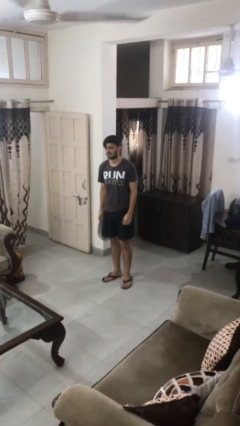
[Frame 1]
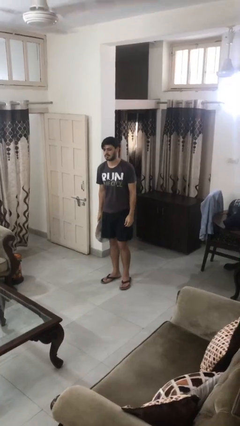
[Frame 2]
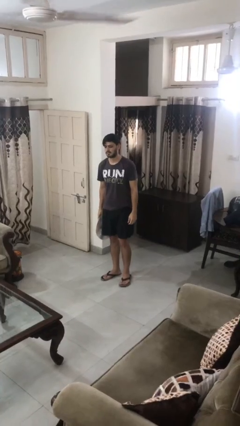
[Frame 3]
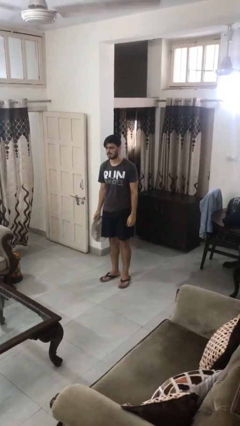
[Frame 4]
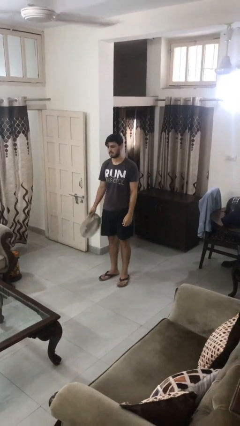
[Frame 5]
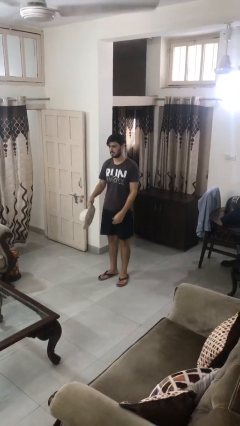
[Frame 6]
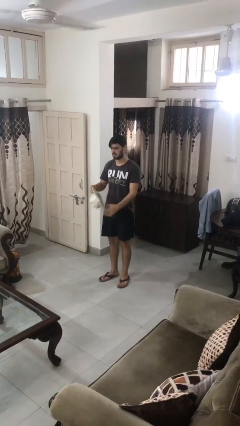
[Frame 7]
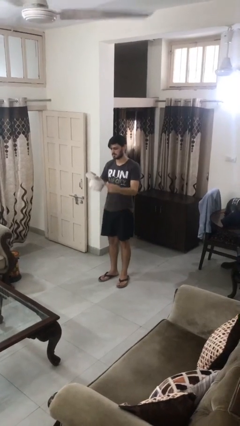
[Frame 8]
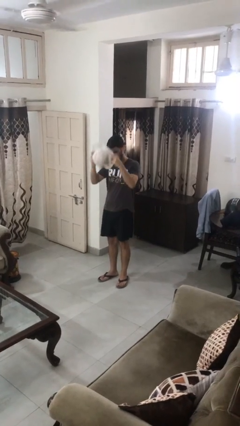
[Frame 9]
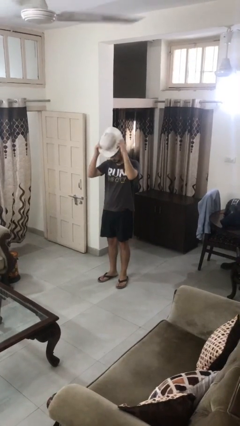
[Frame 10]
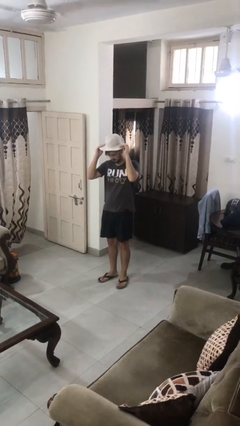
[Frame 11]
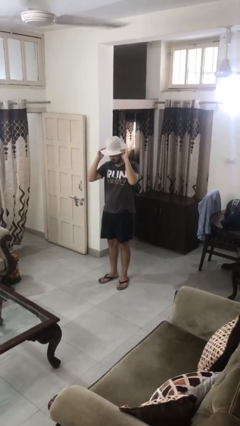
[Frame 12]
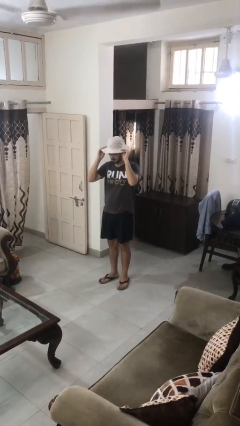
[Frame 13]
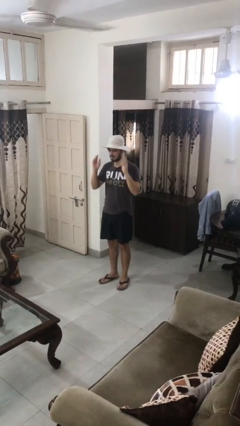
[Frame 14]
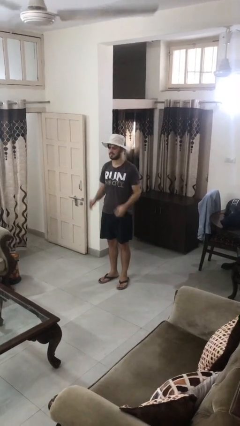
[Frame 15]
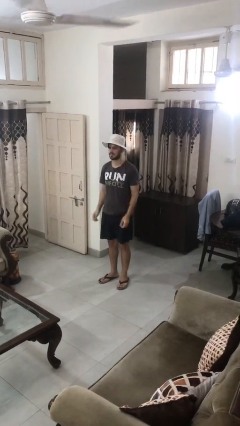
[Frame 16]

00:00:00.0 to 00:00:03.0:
person puts on hat

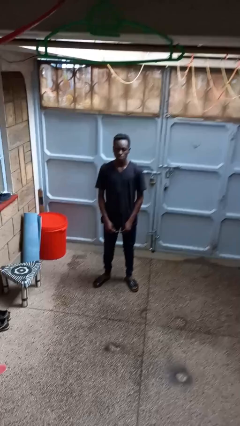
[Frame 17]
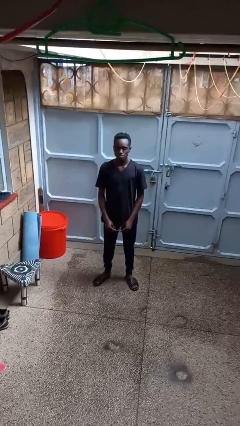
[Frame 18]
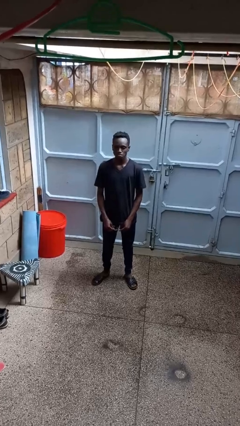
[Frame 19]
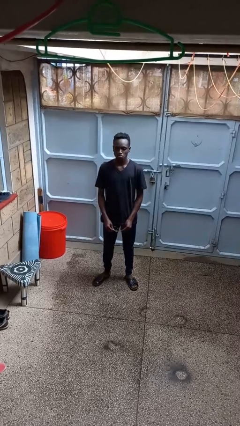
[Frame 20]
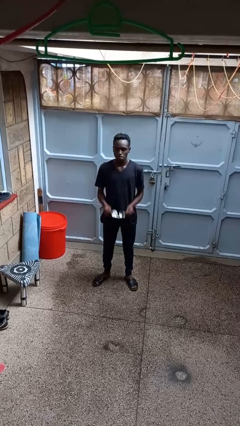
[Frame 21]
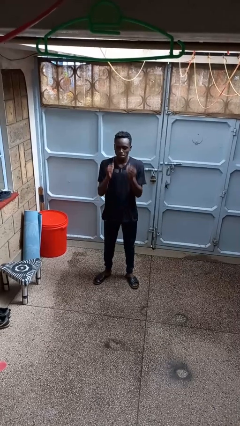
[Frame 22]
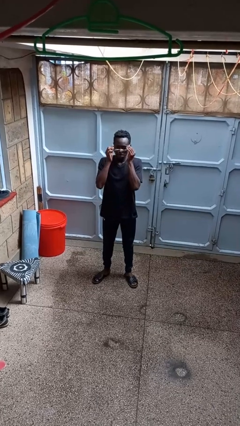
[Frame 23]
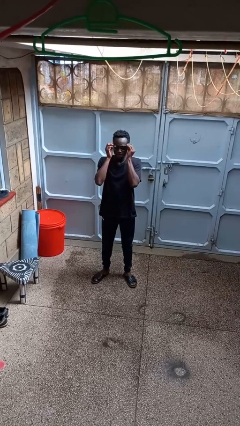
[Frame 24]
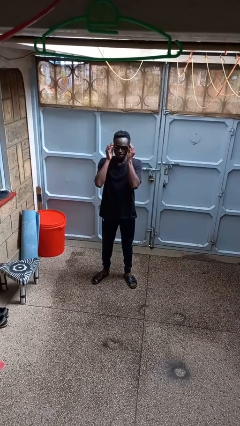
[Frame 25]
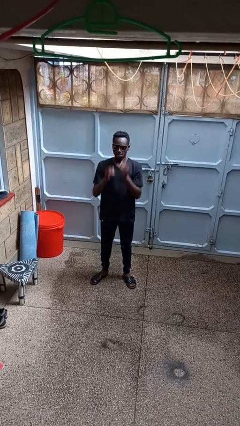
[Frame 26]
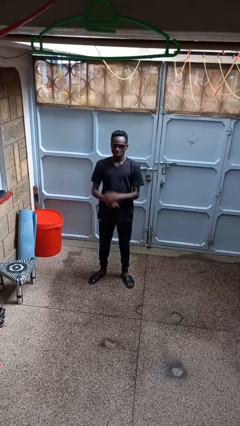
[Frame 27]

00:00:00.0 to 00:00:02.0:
person puts on sunglasses

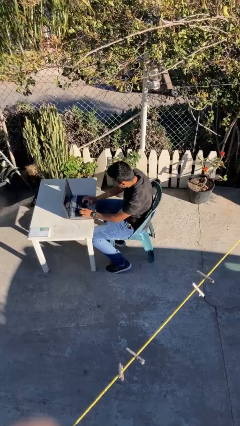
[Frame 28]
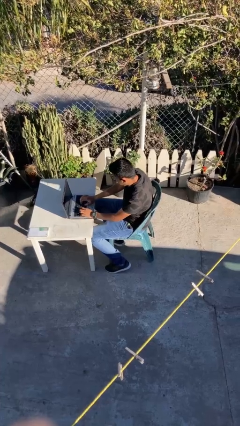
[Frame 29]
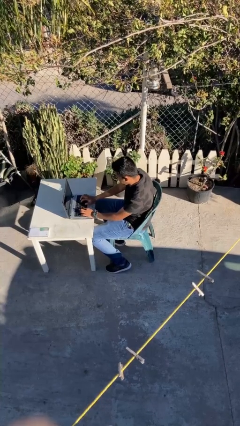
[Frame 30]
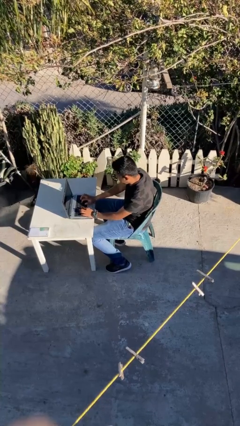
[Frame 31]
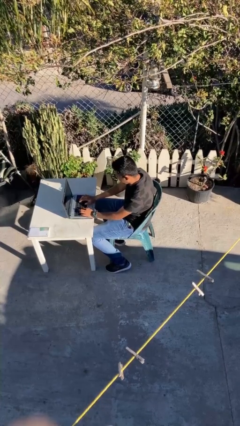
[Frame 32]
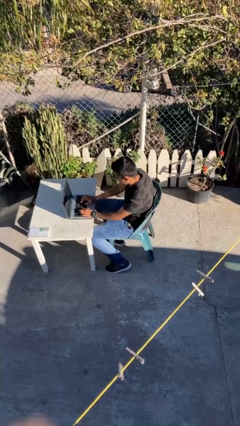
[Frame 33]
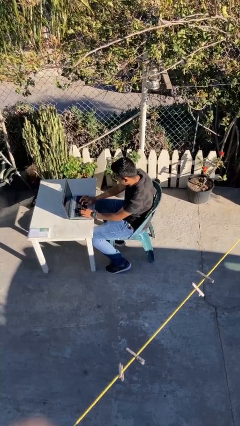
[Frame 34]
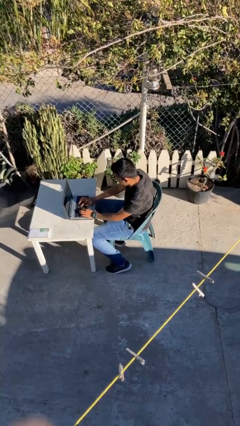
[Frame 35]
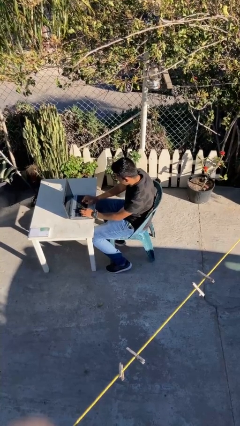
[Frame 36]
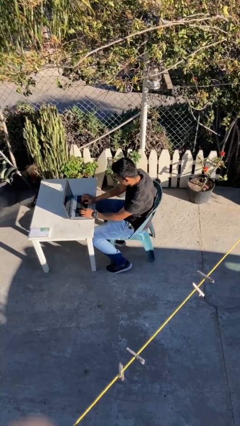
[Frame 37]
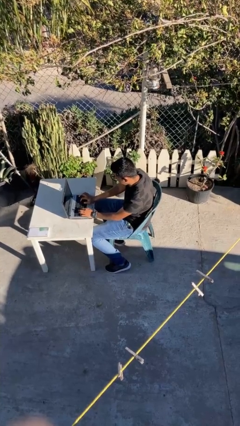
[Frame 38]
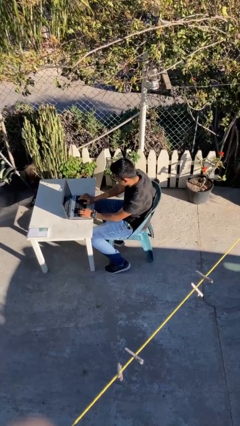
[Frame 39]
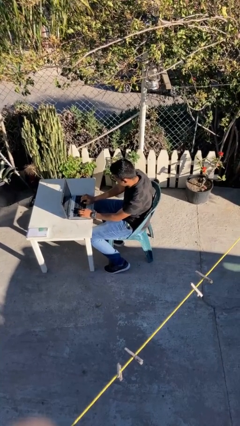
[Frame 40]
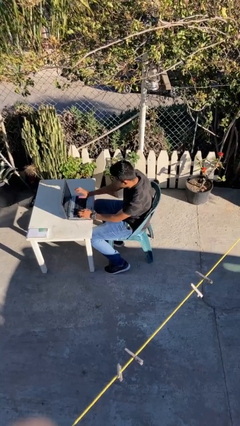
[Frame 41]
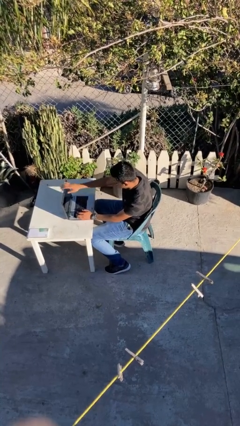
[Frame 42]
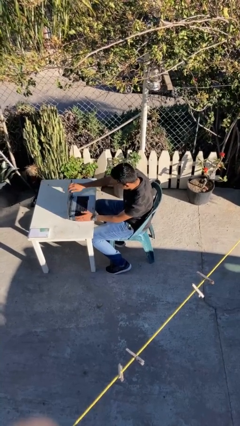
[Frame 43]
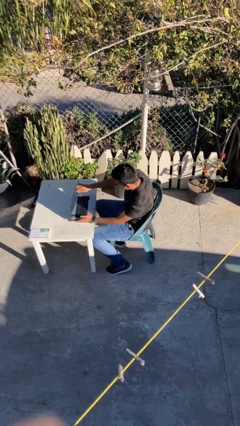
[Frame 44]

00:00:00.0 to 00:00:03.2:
person interacts with laptop

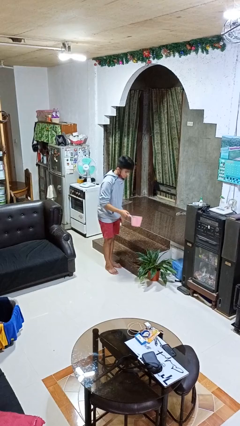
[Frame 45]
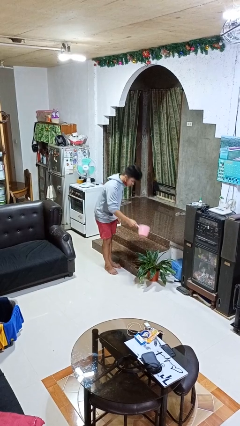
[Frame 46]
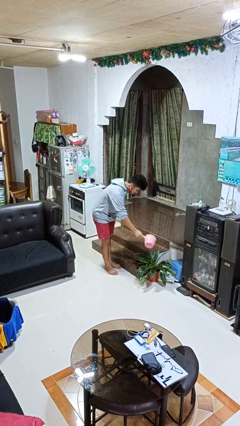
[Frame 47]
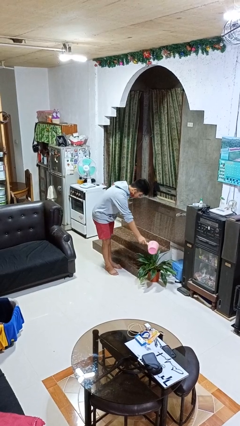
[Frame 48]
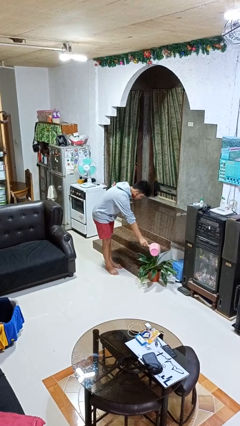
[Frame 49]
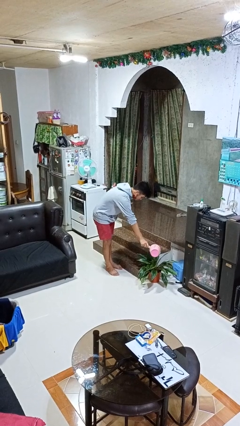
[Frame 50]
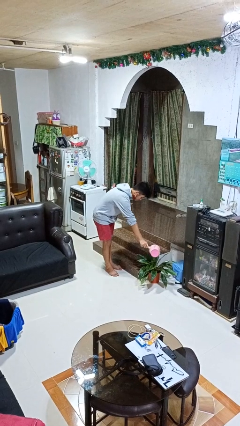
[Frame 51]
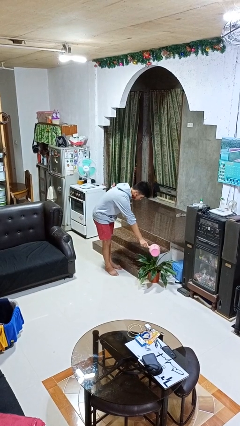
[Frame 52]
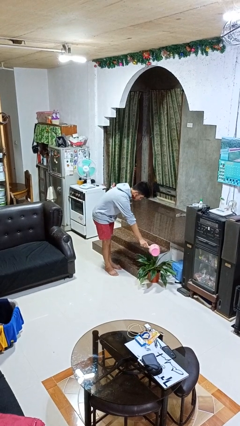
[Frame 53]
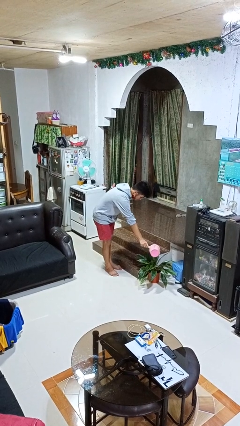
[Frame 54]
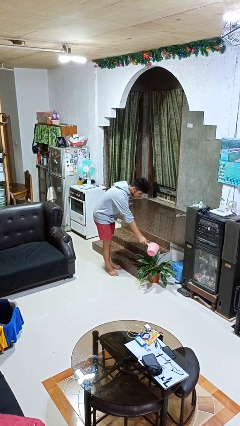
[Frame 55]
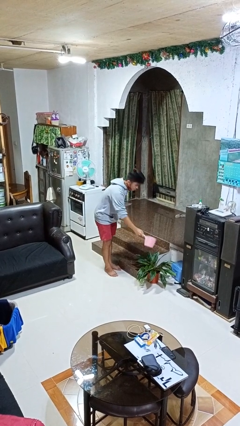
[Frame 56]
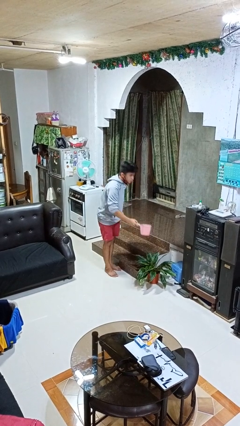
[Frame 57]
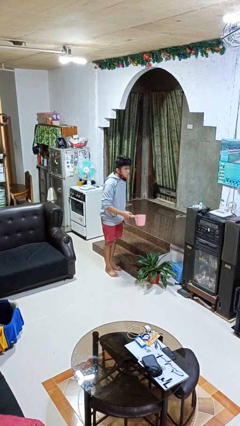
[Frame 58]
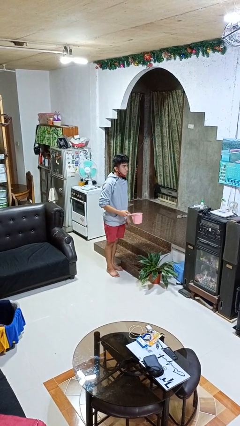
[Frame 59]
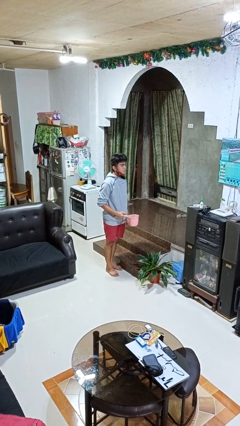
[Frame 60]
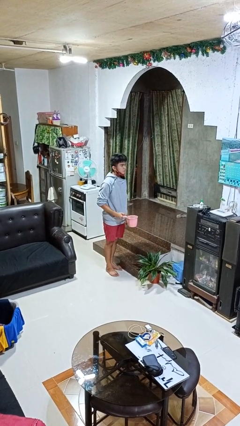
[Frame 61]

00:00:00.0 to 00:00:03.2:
person waters houseplant

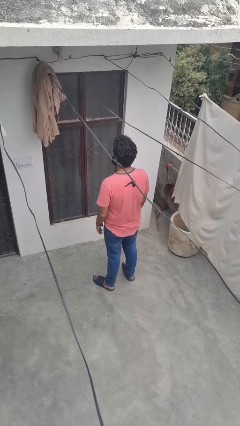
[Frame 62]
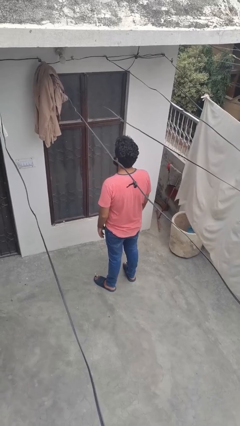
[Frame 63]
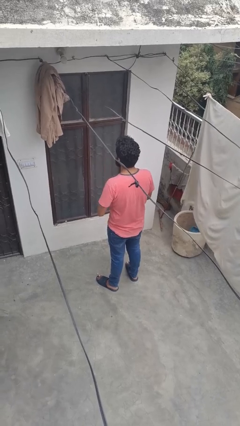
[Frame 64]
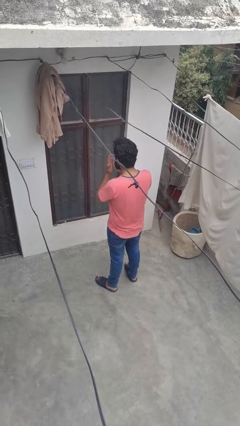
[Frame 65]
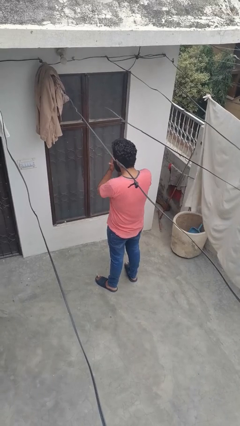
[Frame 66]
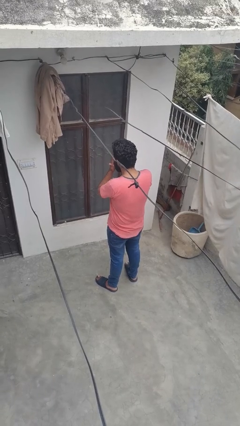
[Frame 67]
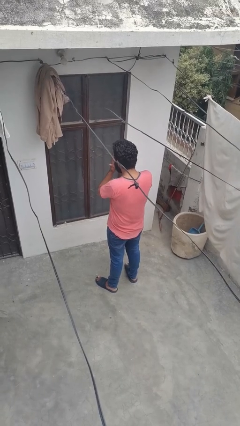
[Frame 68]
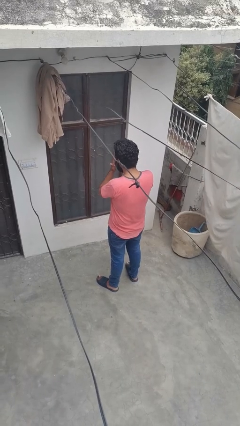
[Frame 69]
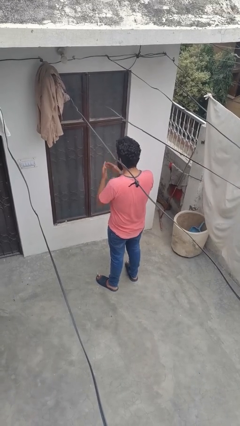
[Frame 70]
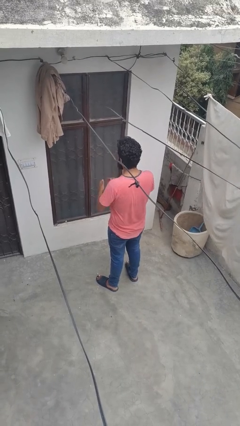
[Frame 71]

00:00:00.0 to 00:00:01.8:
person covers face with hands

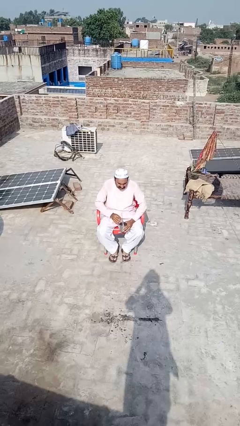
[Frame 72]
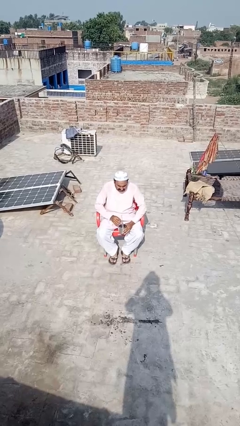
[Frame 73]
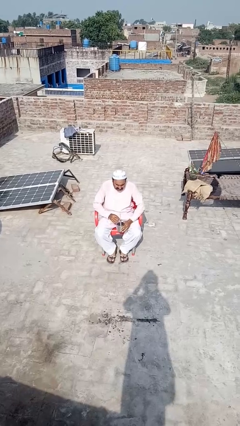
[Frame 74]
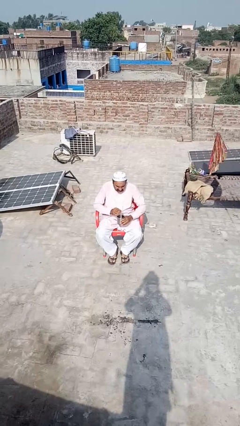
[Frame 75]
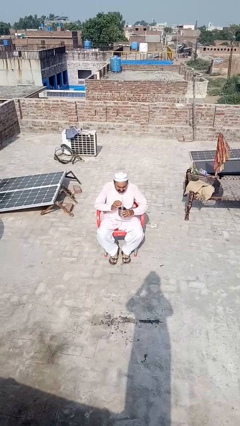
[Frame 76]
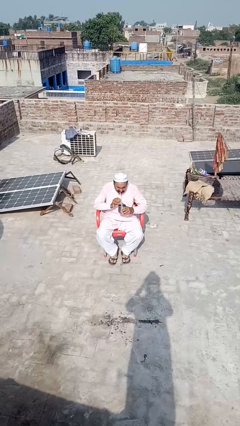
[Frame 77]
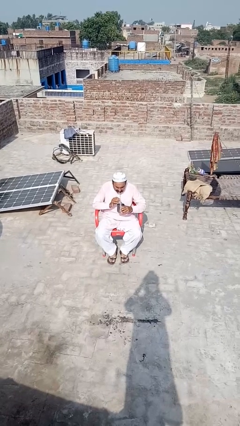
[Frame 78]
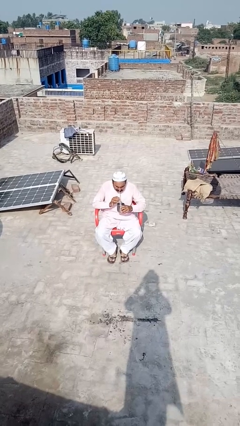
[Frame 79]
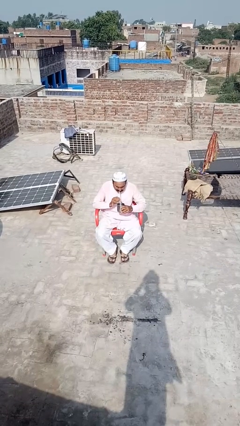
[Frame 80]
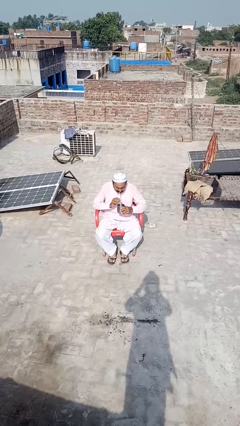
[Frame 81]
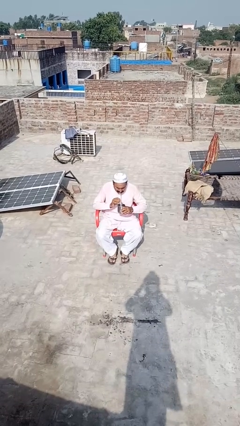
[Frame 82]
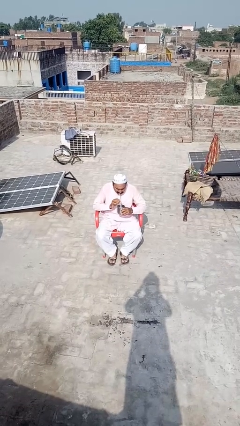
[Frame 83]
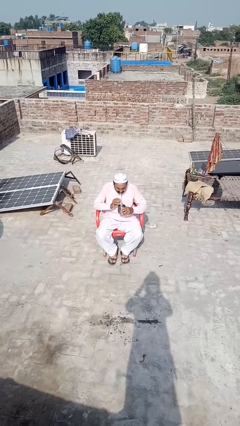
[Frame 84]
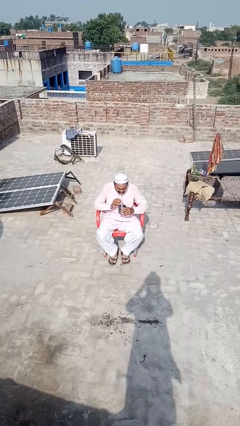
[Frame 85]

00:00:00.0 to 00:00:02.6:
person drinks from straw

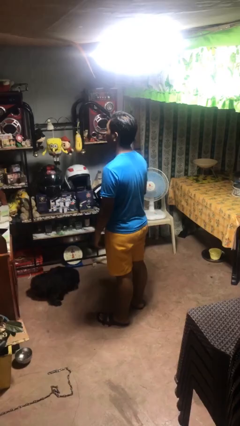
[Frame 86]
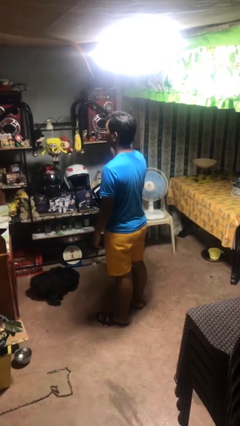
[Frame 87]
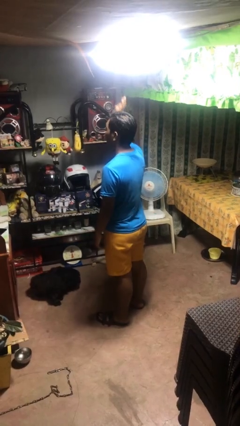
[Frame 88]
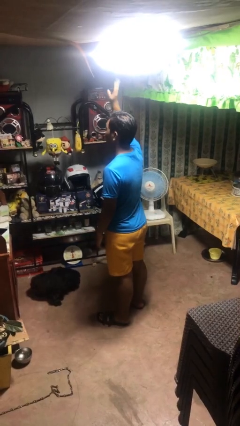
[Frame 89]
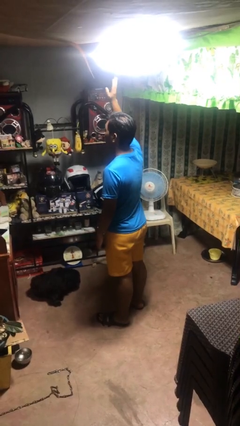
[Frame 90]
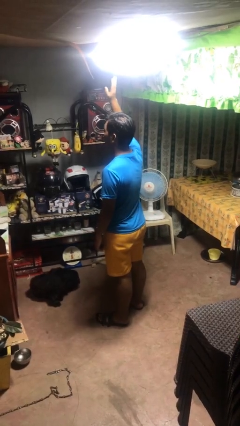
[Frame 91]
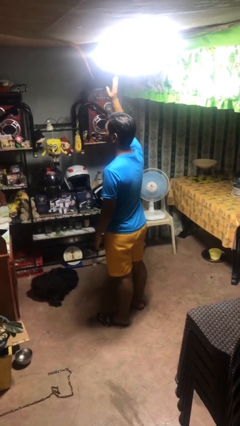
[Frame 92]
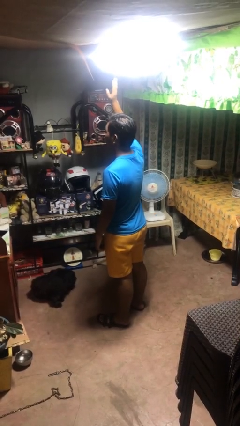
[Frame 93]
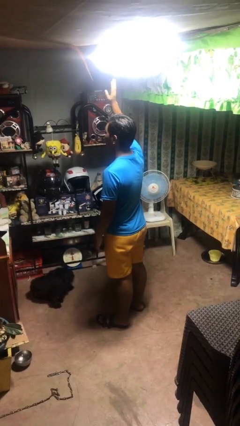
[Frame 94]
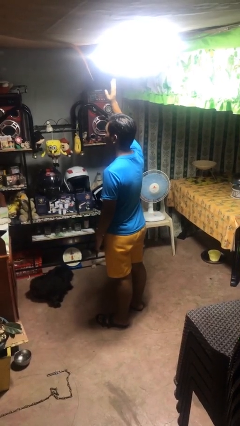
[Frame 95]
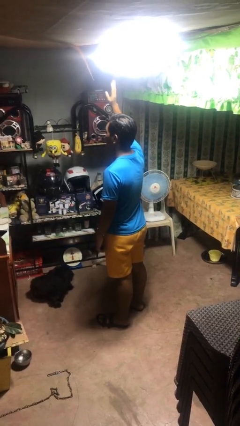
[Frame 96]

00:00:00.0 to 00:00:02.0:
person gestures raise hand
